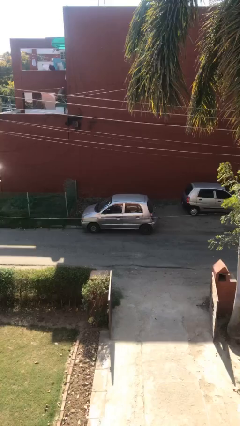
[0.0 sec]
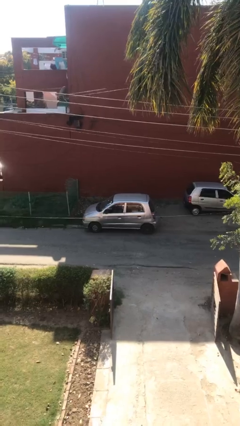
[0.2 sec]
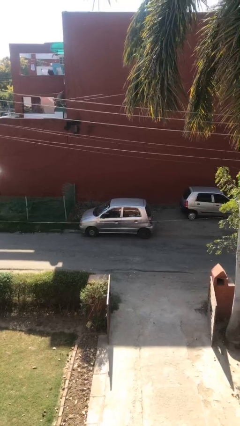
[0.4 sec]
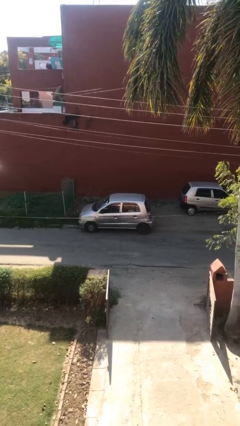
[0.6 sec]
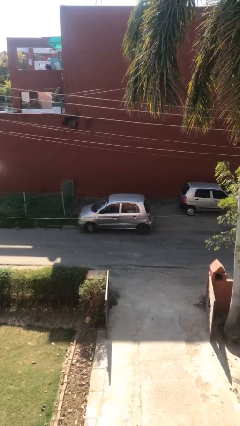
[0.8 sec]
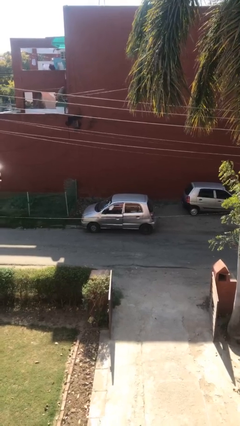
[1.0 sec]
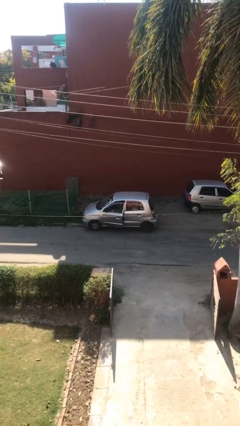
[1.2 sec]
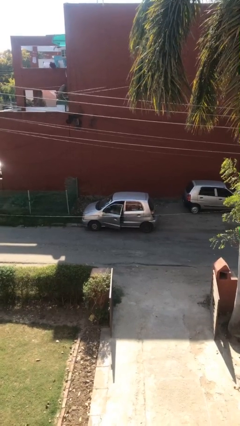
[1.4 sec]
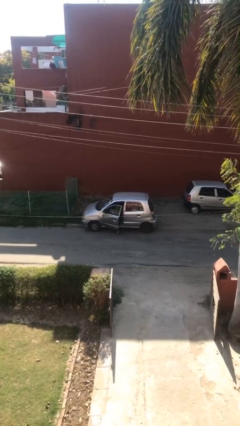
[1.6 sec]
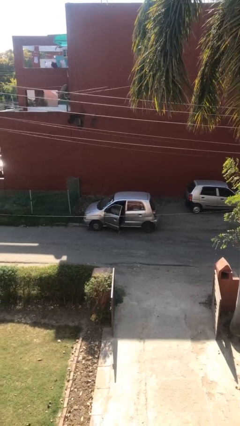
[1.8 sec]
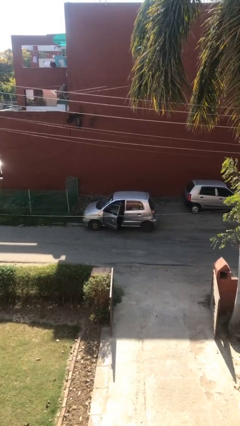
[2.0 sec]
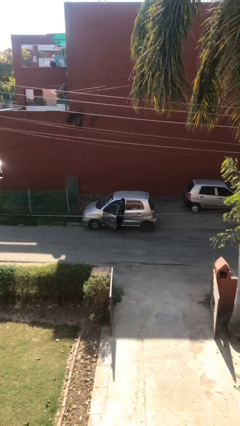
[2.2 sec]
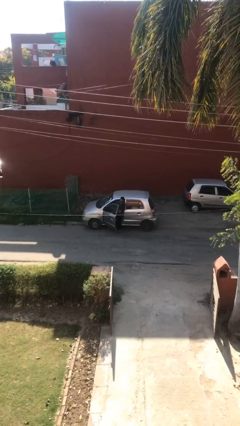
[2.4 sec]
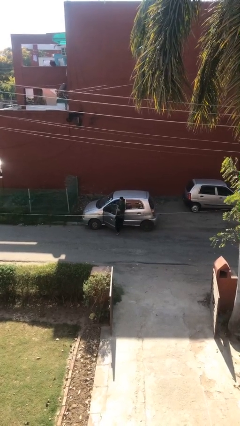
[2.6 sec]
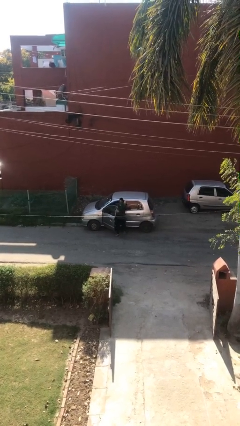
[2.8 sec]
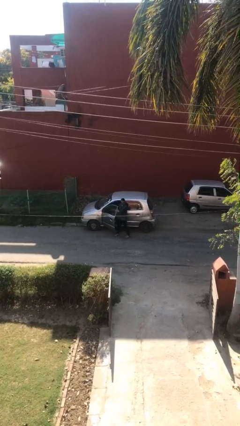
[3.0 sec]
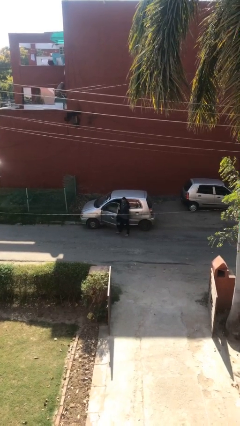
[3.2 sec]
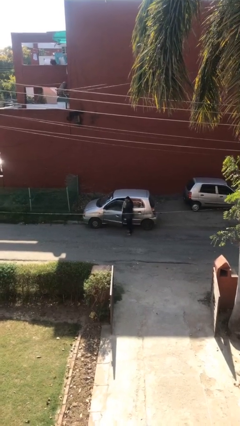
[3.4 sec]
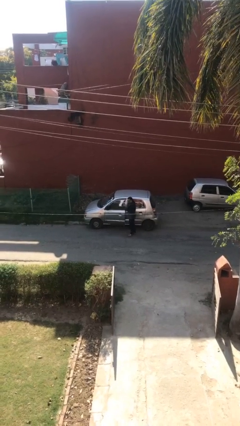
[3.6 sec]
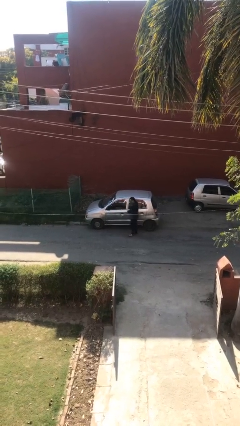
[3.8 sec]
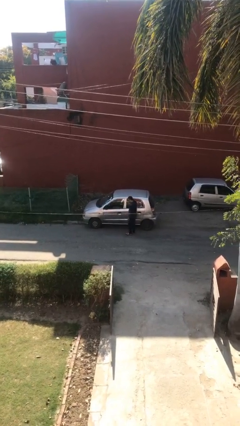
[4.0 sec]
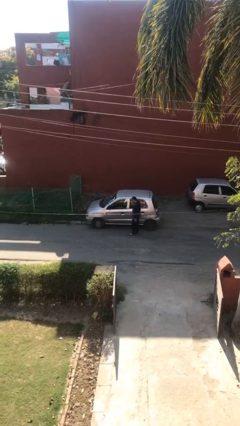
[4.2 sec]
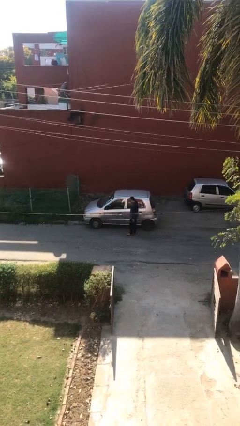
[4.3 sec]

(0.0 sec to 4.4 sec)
car drops off person

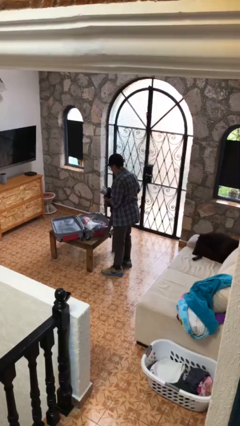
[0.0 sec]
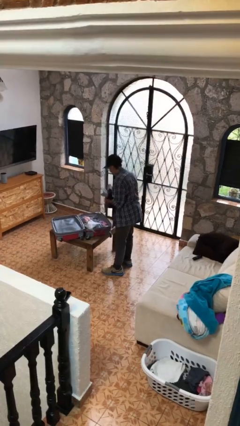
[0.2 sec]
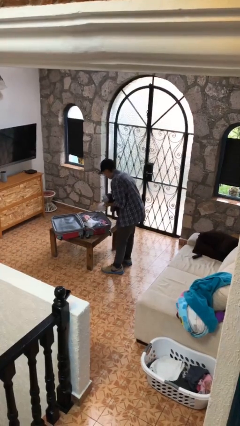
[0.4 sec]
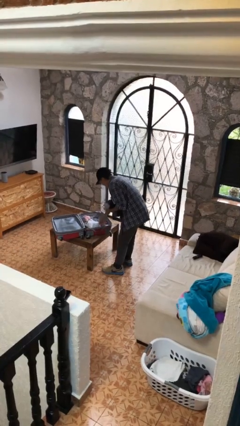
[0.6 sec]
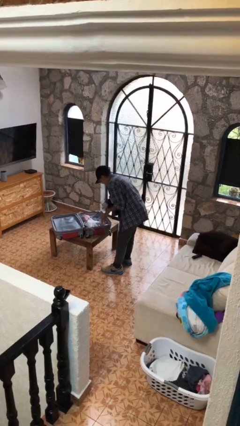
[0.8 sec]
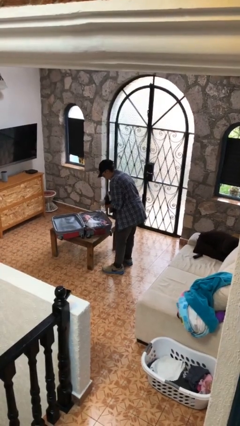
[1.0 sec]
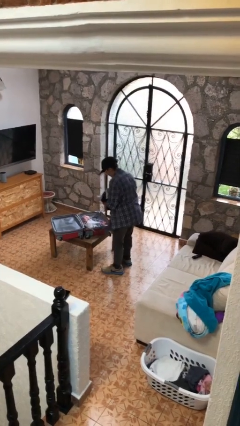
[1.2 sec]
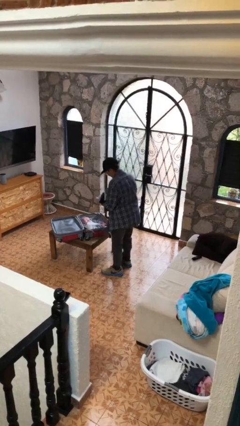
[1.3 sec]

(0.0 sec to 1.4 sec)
person loads clothes into suitcase

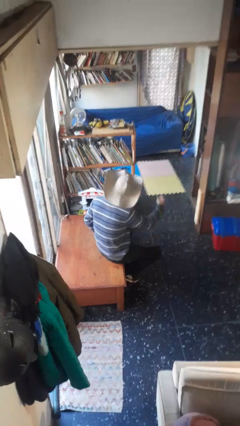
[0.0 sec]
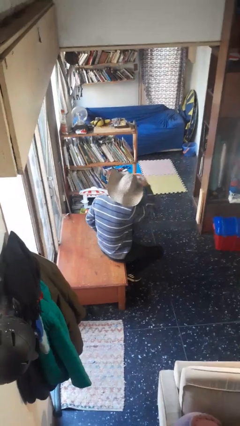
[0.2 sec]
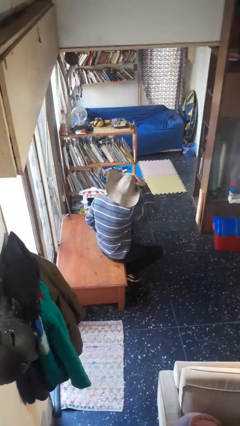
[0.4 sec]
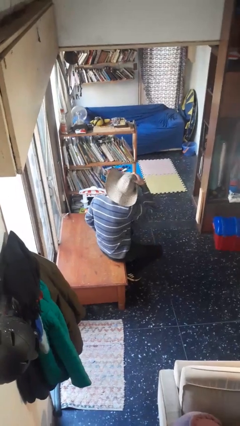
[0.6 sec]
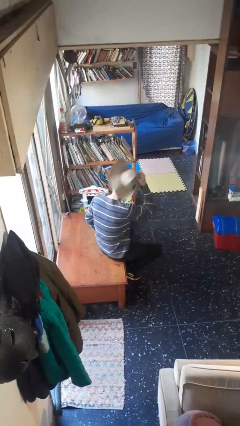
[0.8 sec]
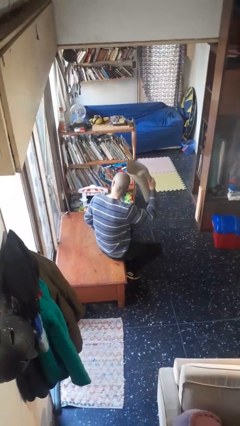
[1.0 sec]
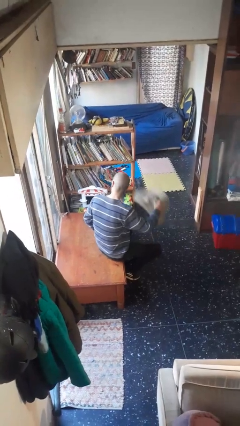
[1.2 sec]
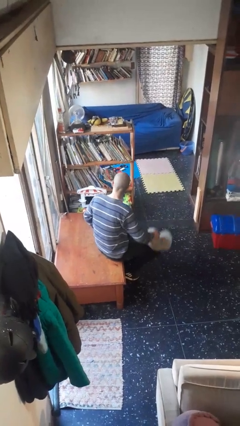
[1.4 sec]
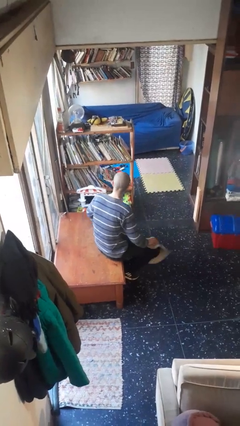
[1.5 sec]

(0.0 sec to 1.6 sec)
person takes off hat

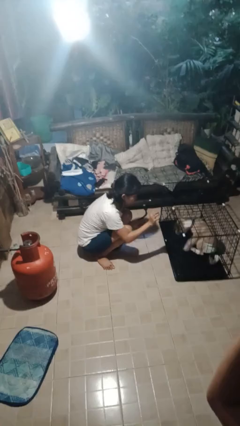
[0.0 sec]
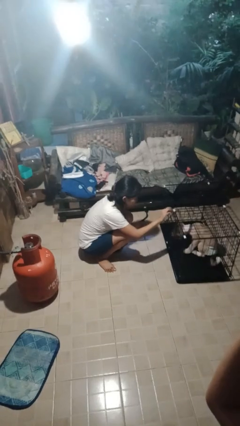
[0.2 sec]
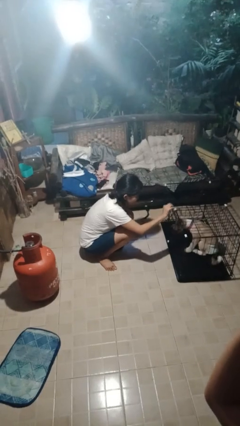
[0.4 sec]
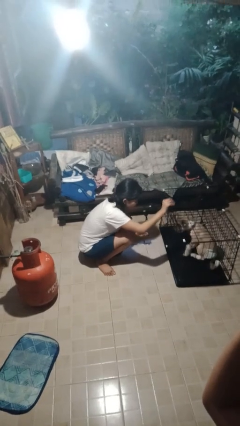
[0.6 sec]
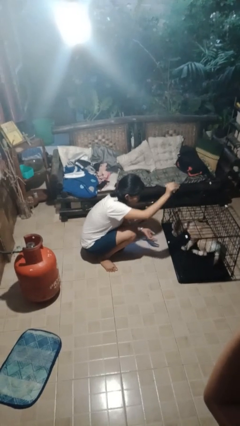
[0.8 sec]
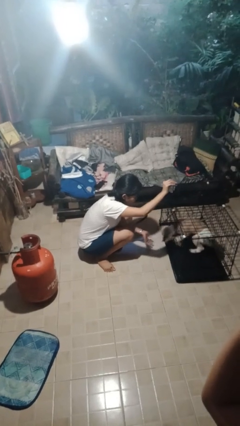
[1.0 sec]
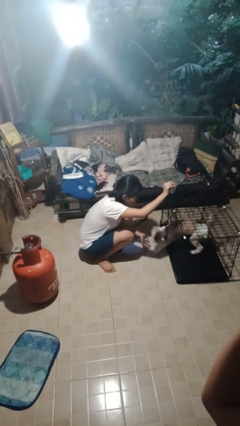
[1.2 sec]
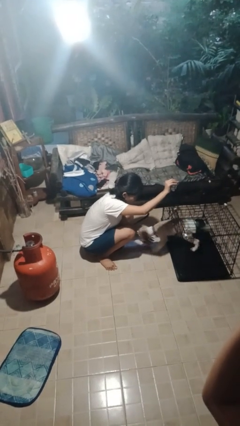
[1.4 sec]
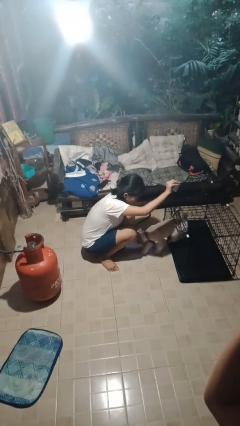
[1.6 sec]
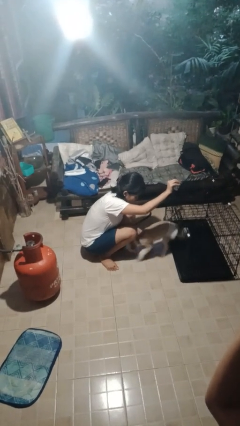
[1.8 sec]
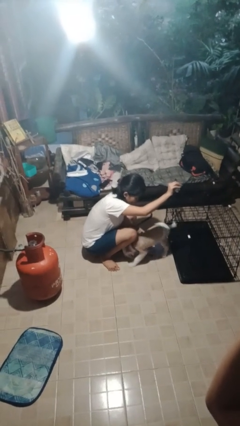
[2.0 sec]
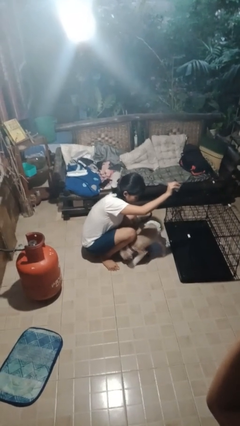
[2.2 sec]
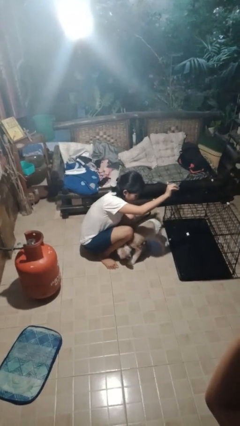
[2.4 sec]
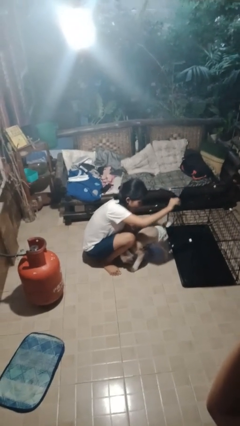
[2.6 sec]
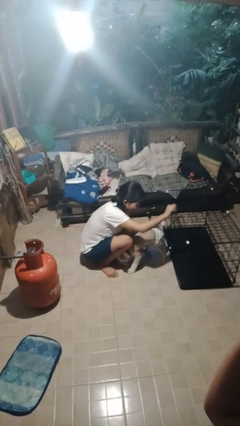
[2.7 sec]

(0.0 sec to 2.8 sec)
person uncrates dog

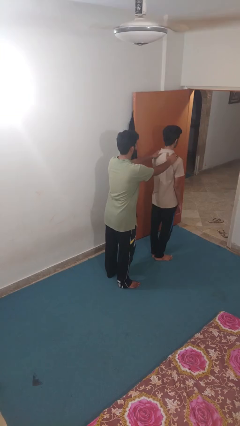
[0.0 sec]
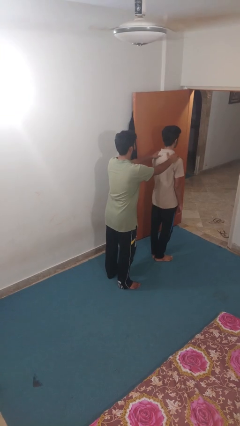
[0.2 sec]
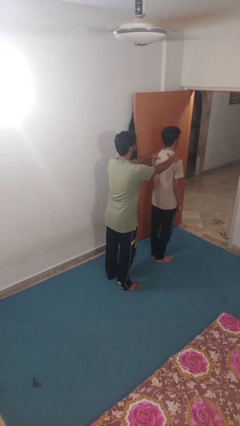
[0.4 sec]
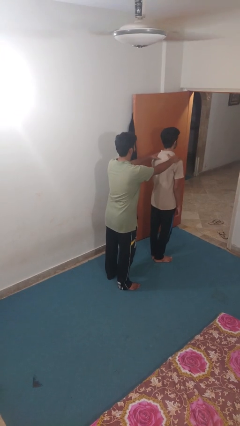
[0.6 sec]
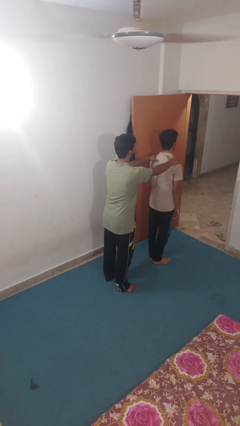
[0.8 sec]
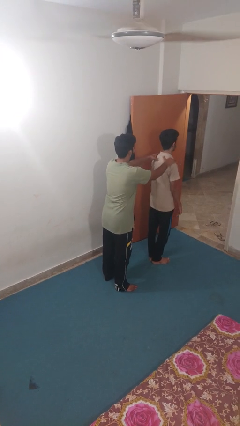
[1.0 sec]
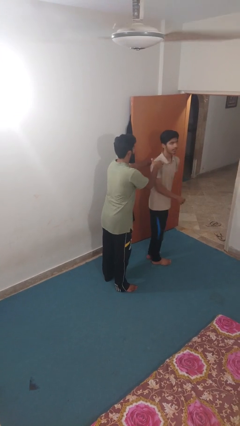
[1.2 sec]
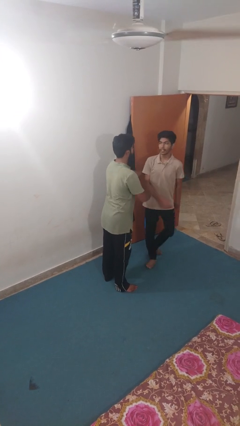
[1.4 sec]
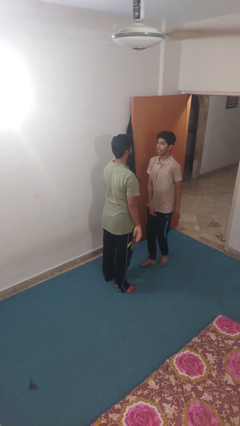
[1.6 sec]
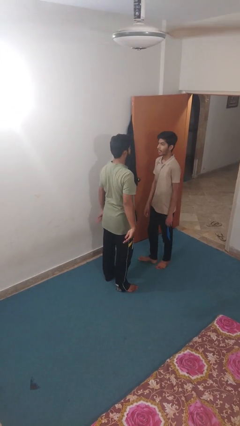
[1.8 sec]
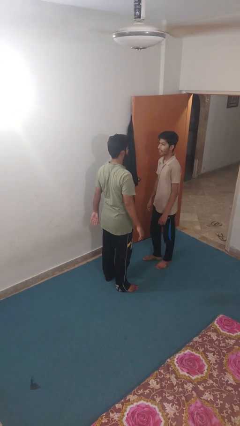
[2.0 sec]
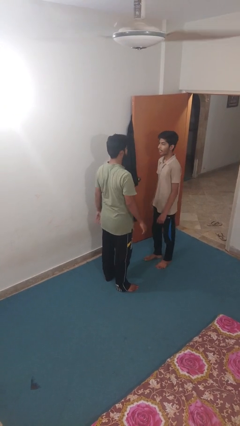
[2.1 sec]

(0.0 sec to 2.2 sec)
person spins person around

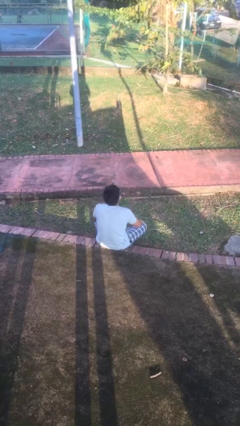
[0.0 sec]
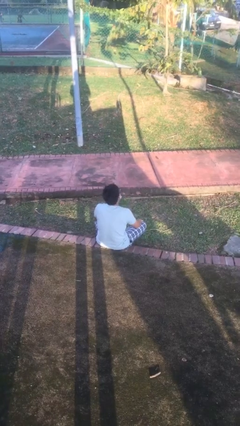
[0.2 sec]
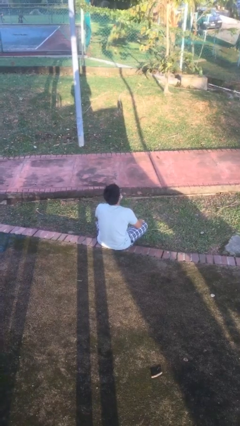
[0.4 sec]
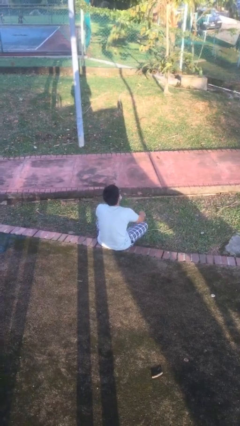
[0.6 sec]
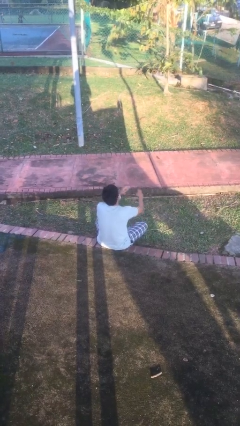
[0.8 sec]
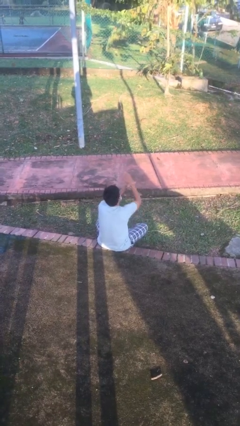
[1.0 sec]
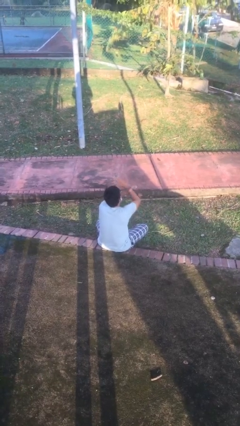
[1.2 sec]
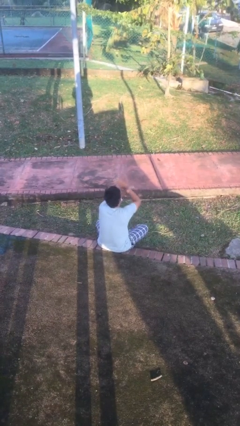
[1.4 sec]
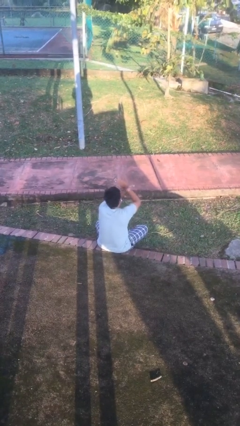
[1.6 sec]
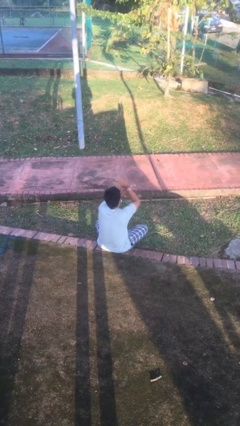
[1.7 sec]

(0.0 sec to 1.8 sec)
person gestures arms x

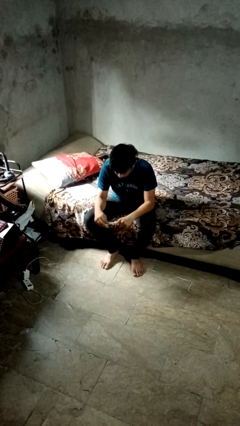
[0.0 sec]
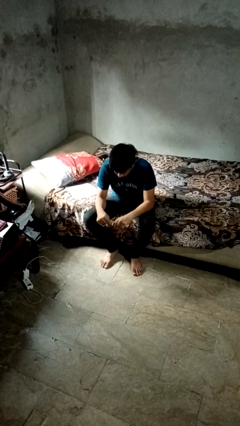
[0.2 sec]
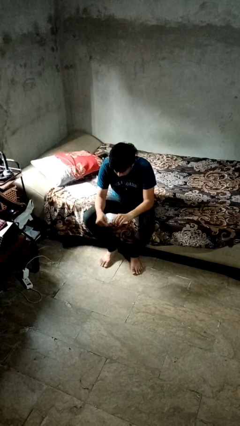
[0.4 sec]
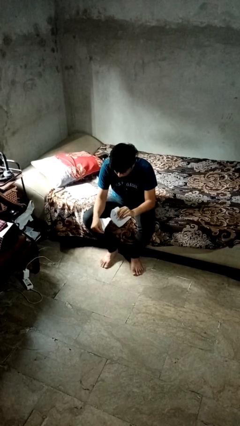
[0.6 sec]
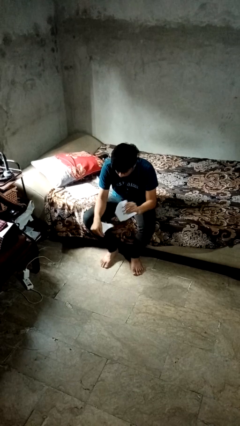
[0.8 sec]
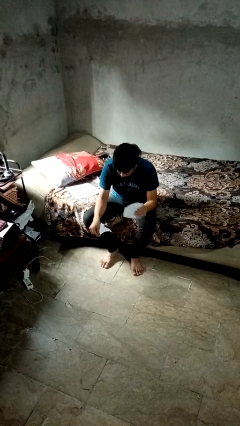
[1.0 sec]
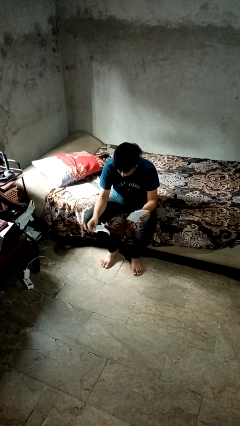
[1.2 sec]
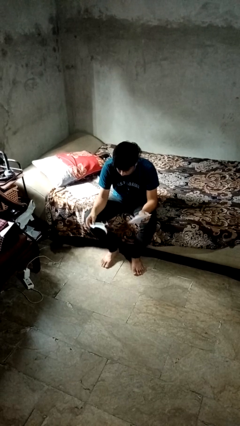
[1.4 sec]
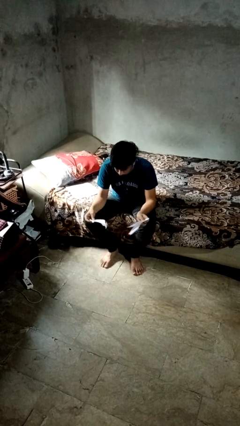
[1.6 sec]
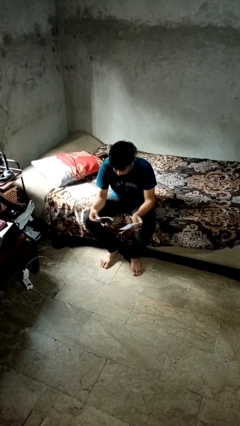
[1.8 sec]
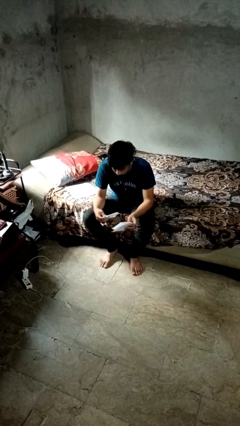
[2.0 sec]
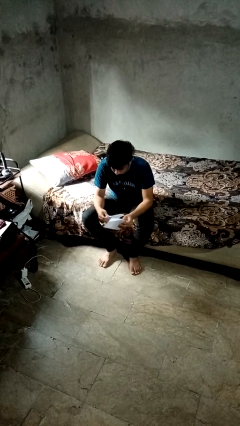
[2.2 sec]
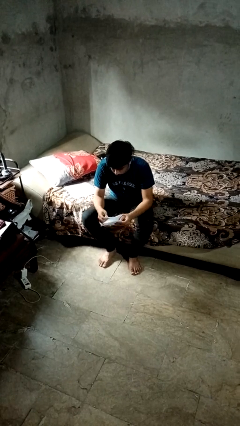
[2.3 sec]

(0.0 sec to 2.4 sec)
person tears paper

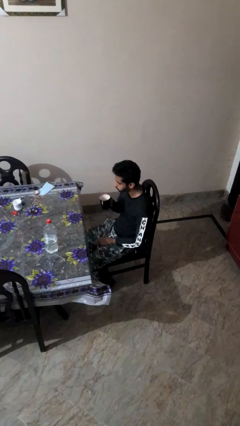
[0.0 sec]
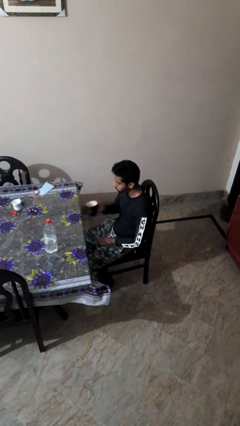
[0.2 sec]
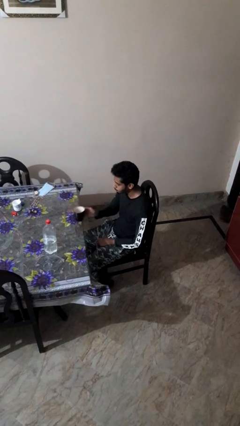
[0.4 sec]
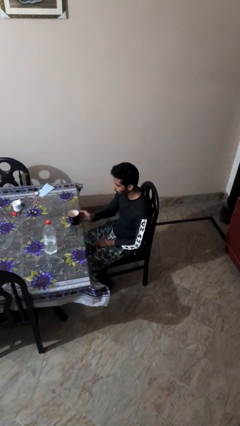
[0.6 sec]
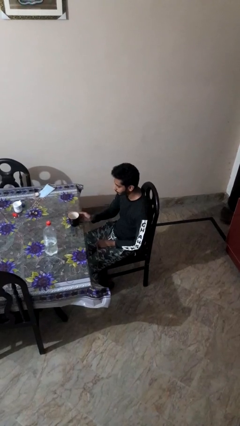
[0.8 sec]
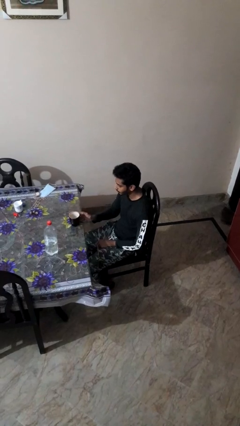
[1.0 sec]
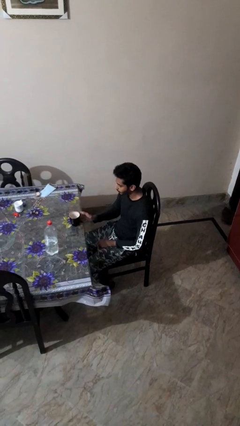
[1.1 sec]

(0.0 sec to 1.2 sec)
person puts down object on table
